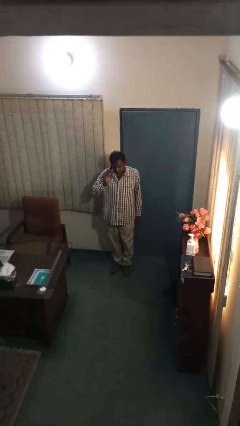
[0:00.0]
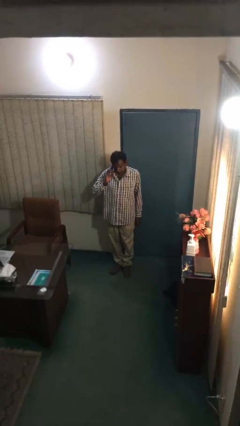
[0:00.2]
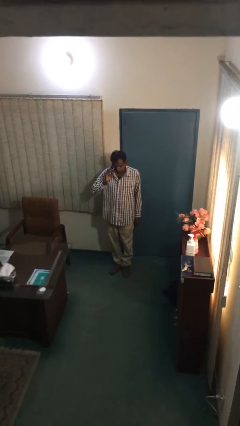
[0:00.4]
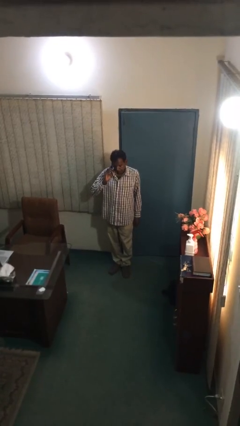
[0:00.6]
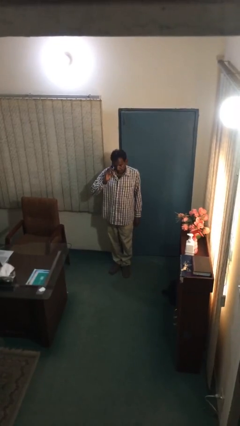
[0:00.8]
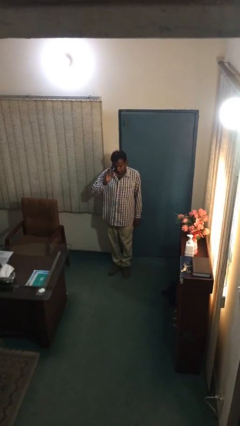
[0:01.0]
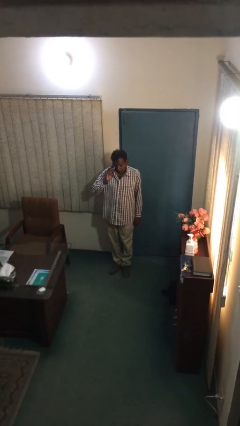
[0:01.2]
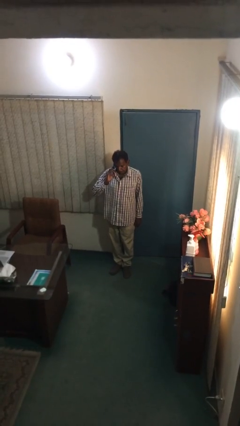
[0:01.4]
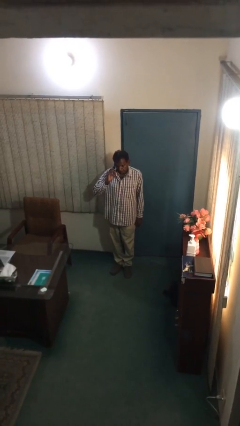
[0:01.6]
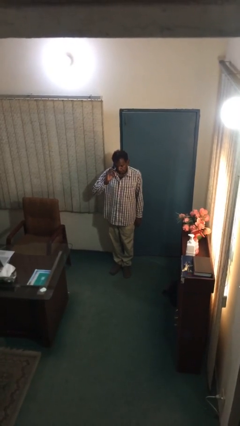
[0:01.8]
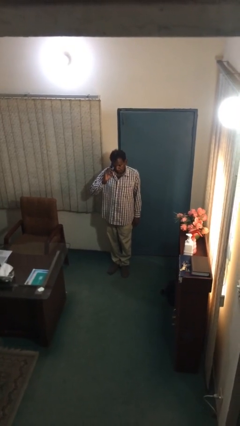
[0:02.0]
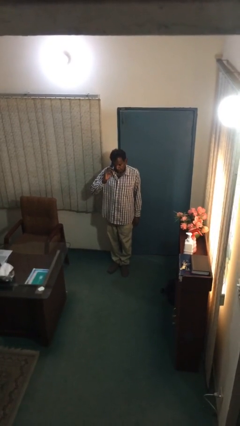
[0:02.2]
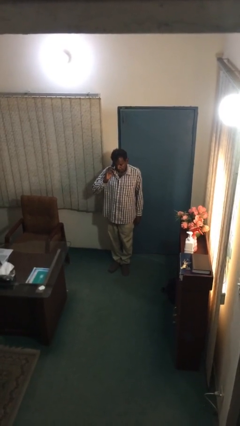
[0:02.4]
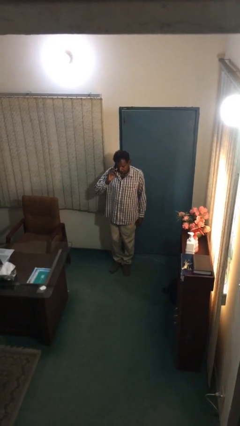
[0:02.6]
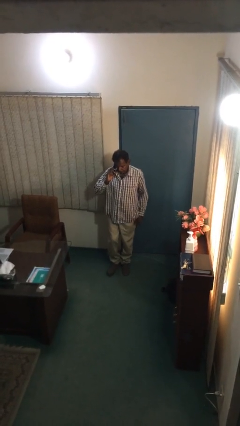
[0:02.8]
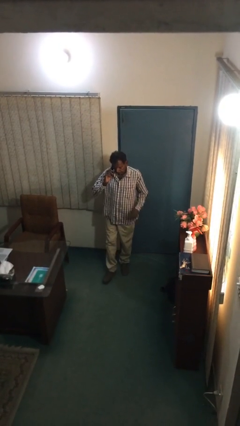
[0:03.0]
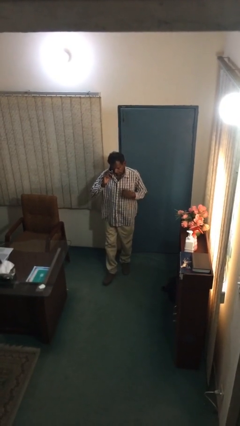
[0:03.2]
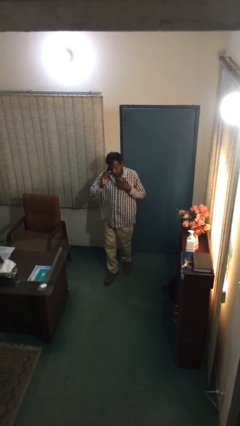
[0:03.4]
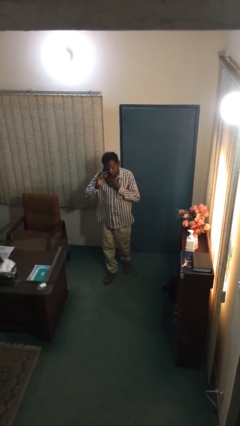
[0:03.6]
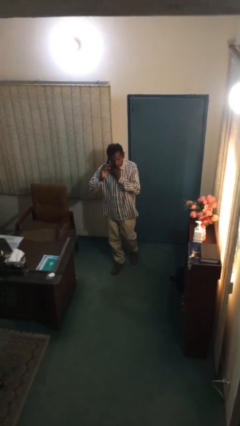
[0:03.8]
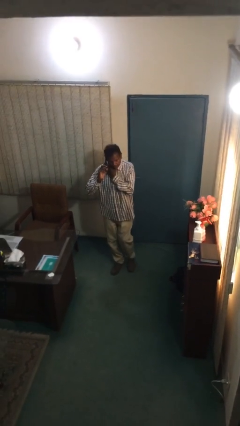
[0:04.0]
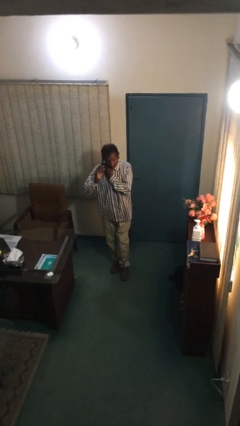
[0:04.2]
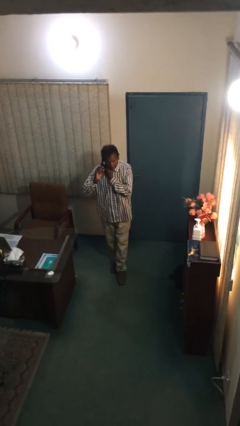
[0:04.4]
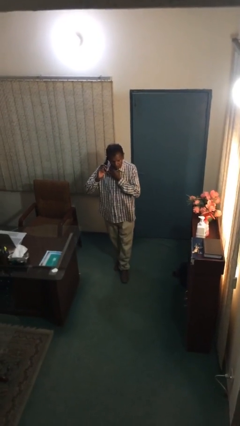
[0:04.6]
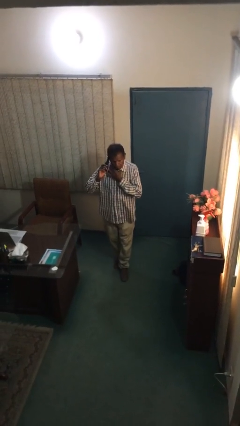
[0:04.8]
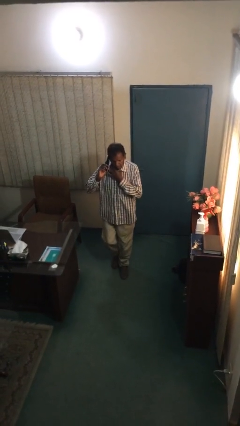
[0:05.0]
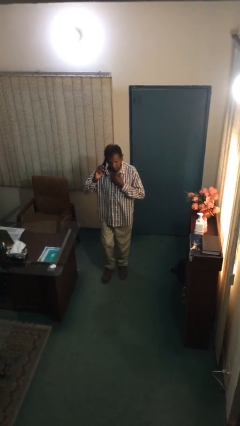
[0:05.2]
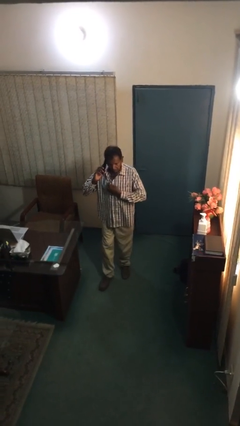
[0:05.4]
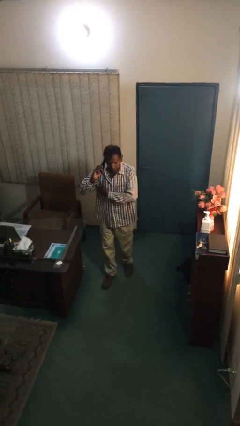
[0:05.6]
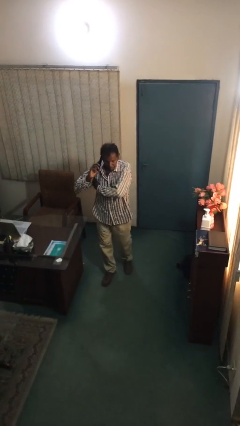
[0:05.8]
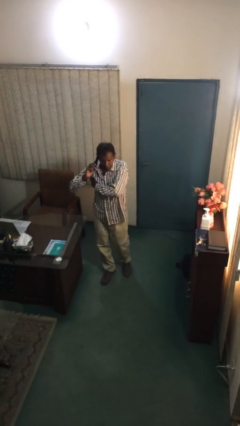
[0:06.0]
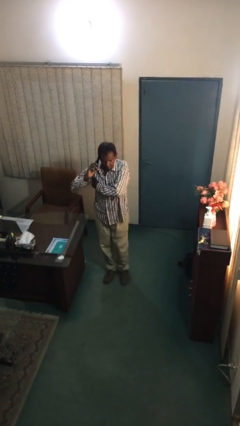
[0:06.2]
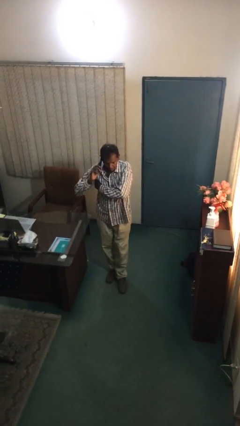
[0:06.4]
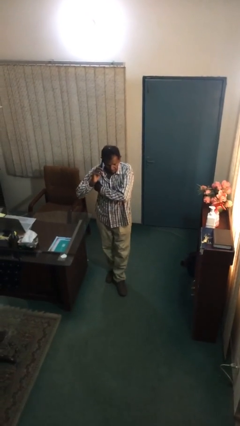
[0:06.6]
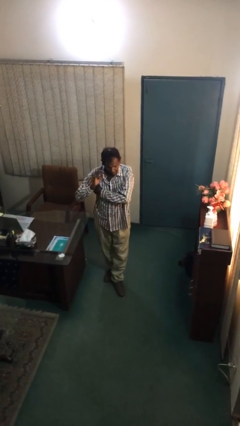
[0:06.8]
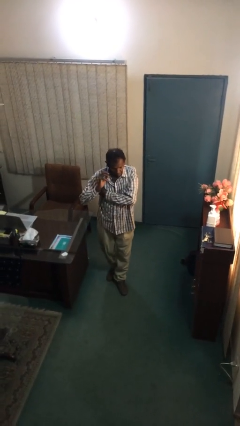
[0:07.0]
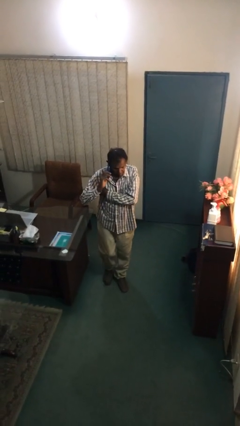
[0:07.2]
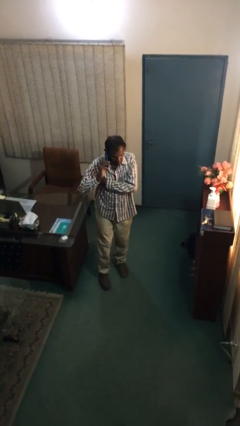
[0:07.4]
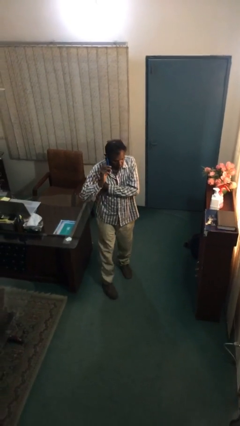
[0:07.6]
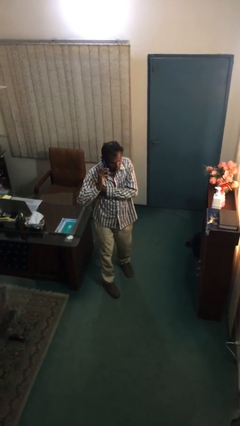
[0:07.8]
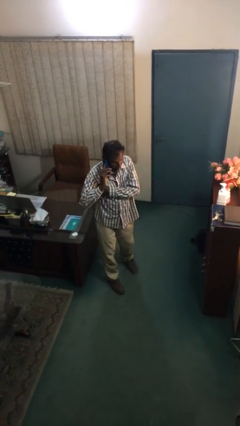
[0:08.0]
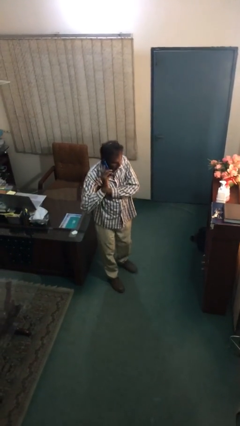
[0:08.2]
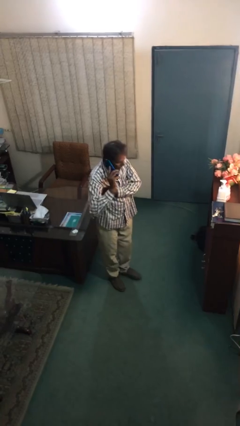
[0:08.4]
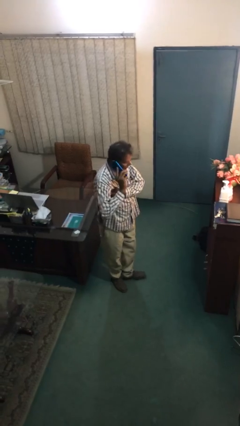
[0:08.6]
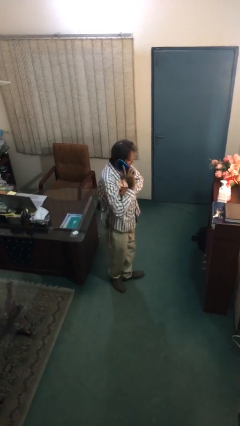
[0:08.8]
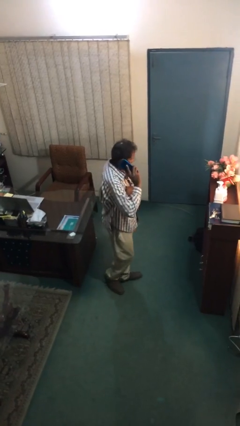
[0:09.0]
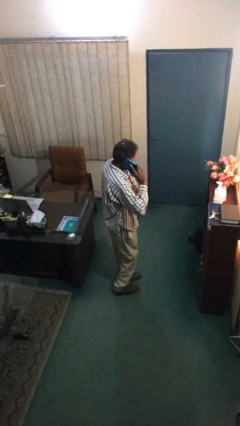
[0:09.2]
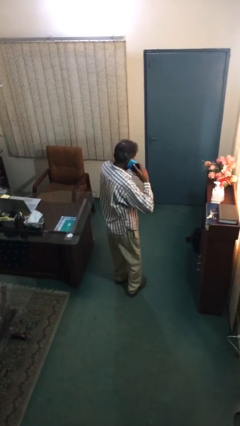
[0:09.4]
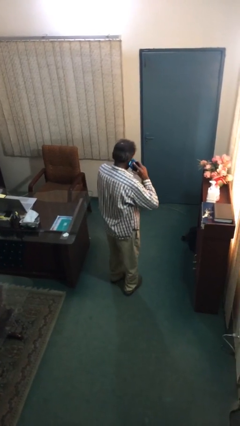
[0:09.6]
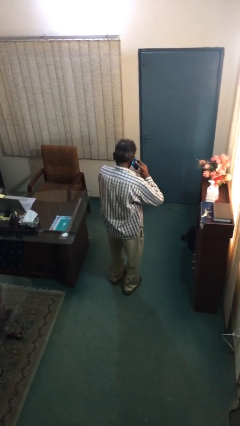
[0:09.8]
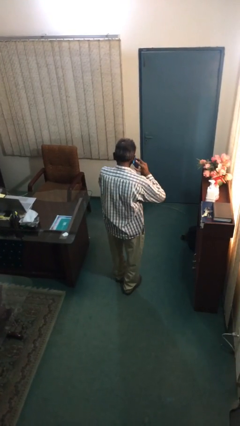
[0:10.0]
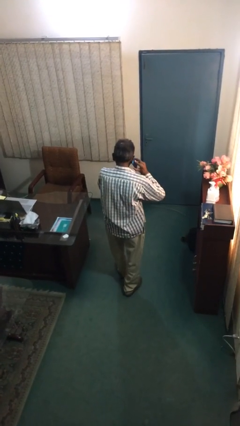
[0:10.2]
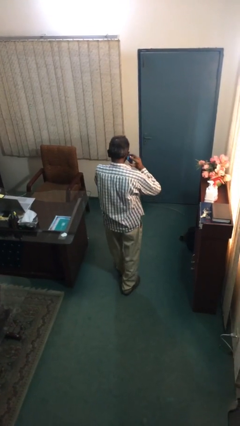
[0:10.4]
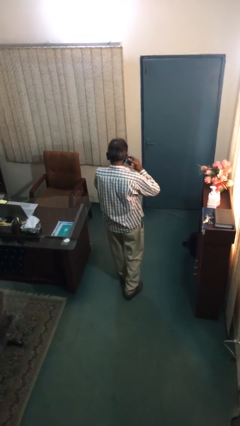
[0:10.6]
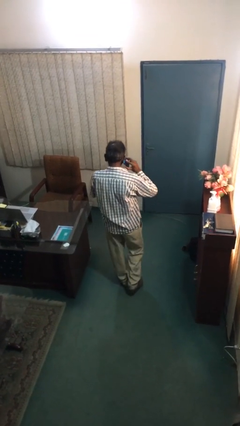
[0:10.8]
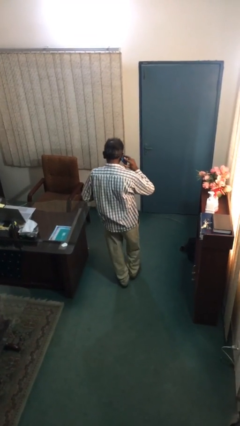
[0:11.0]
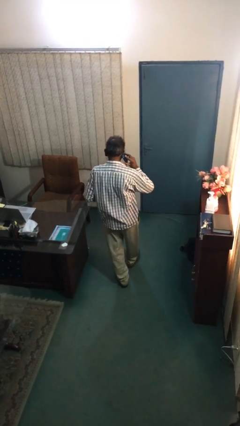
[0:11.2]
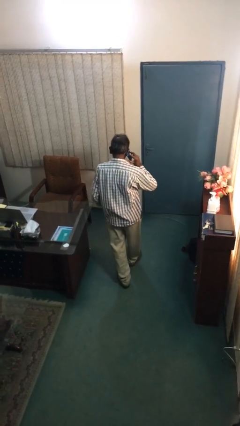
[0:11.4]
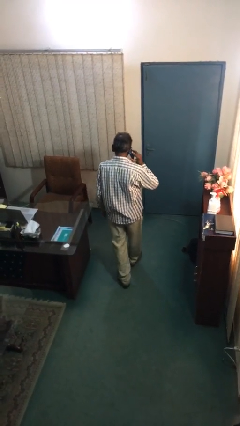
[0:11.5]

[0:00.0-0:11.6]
person talks on phone

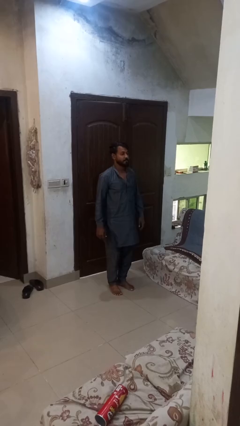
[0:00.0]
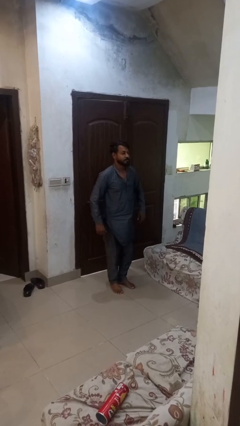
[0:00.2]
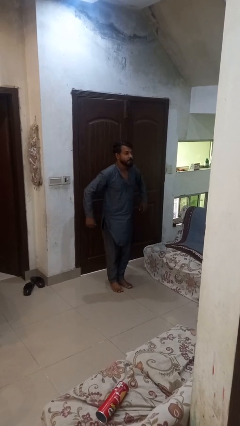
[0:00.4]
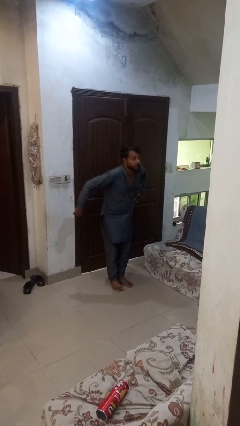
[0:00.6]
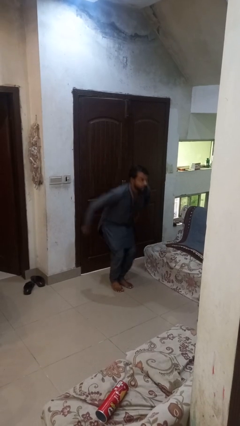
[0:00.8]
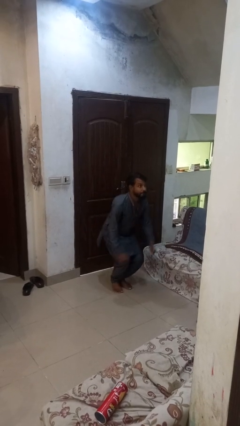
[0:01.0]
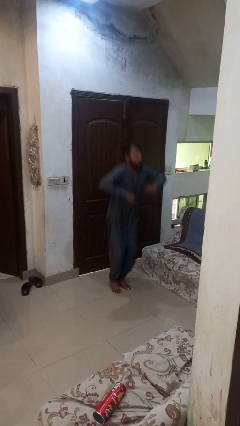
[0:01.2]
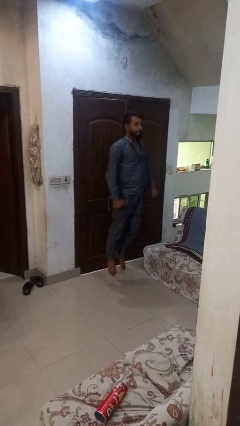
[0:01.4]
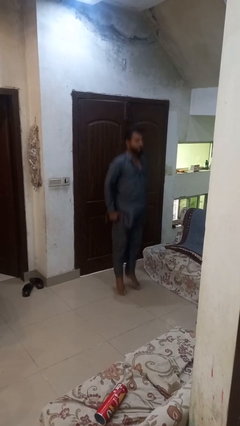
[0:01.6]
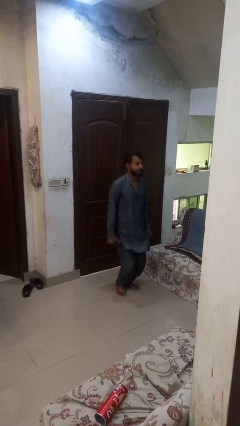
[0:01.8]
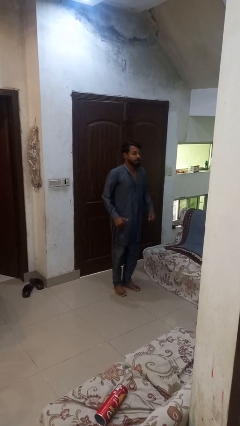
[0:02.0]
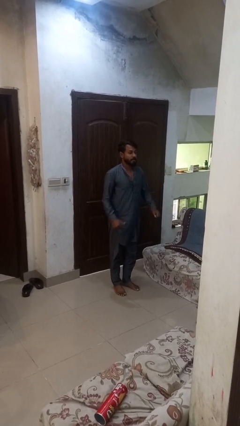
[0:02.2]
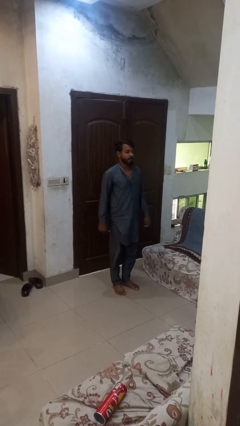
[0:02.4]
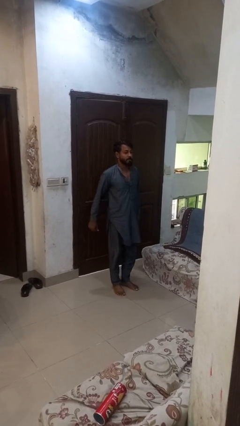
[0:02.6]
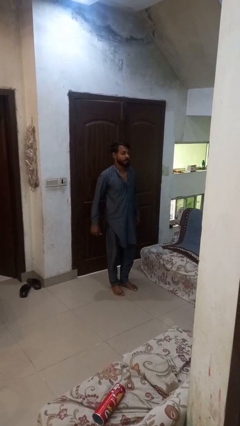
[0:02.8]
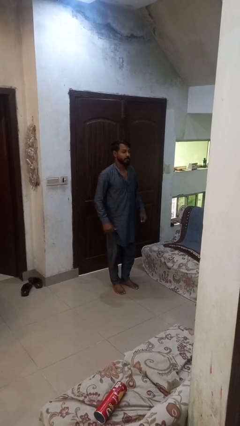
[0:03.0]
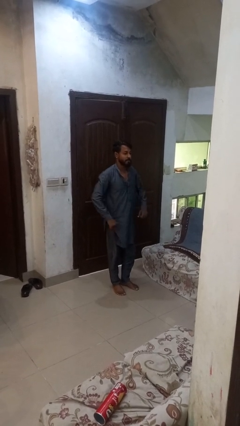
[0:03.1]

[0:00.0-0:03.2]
person jumps

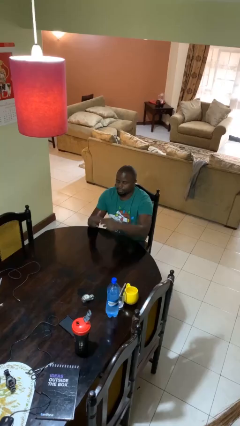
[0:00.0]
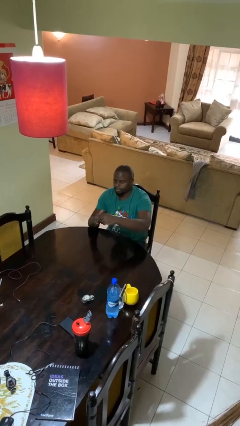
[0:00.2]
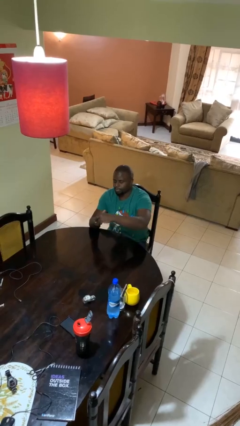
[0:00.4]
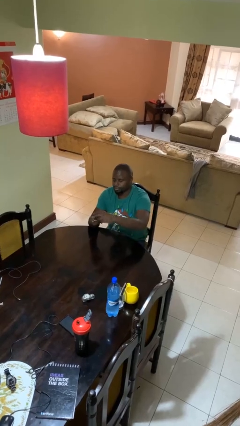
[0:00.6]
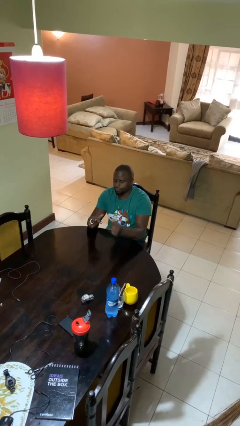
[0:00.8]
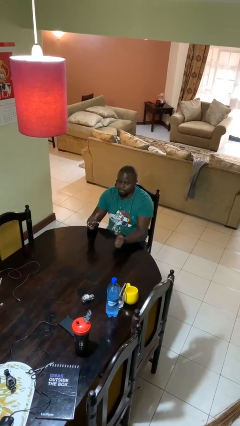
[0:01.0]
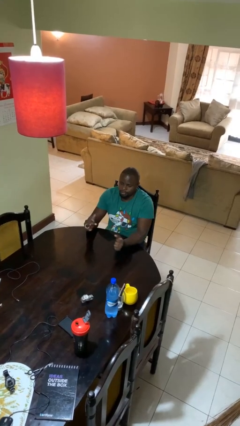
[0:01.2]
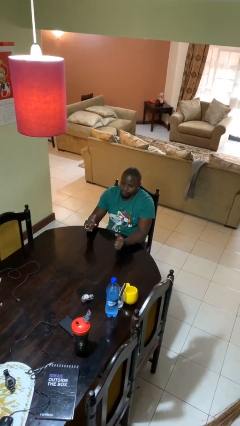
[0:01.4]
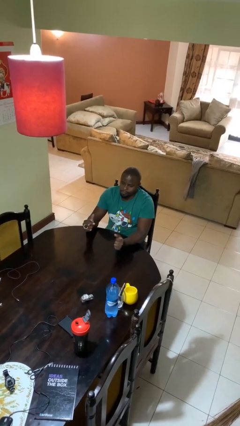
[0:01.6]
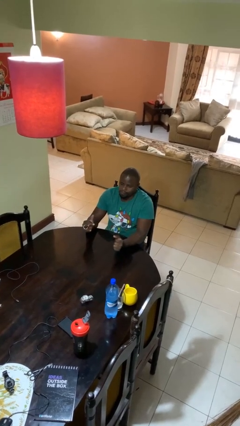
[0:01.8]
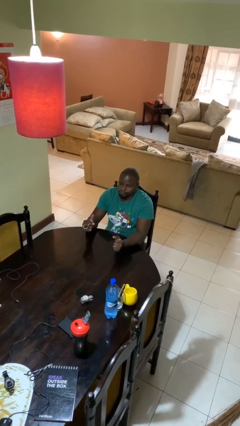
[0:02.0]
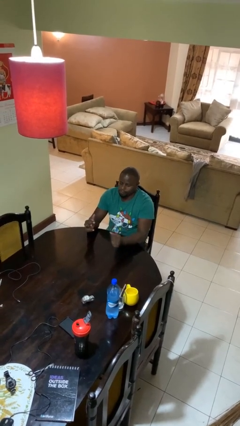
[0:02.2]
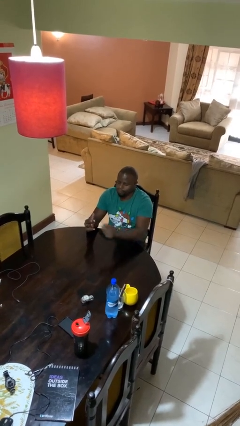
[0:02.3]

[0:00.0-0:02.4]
person puts on ring

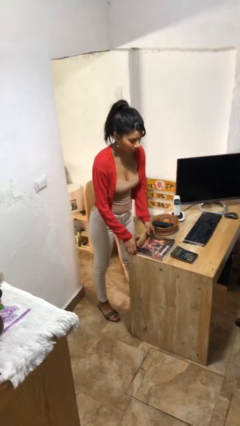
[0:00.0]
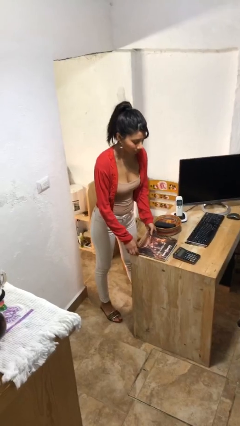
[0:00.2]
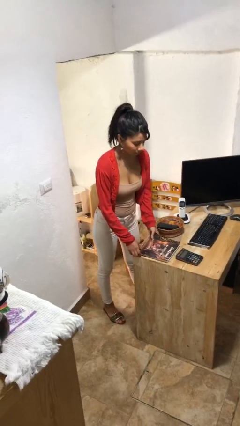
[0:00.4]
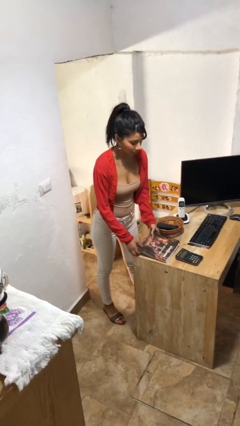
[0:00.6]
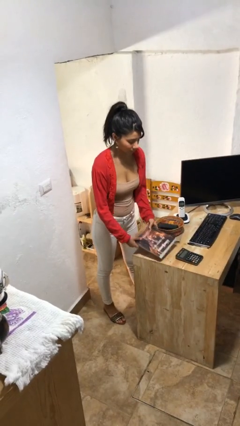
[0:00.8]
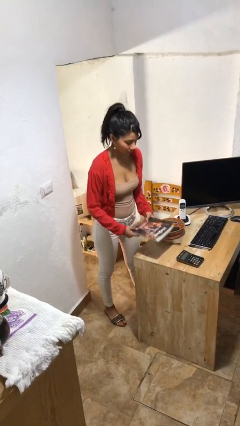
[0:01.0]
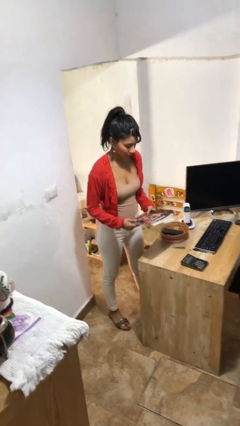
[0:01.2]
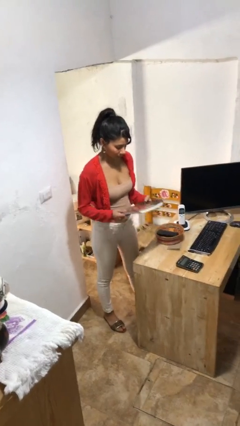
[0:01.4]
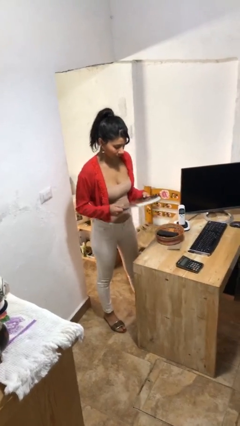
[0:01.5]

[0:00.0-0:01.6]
person picks up object from table
